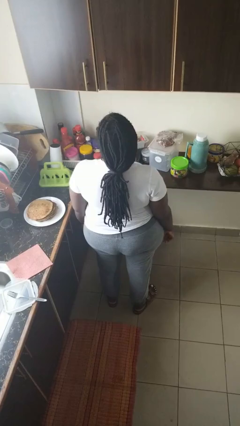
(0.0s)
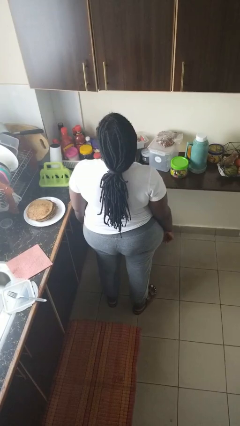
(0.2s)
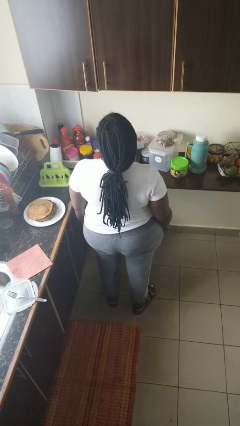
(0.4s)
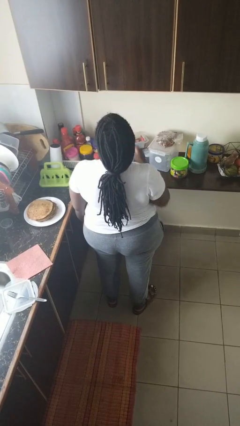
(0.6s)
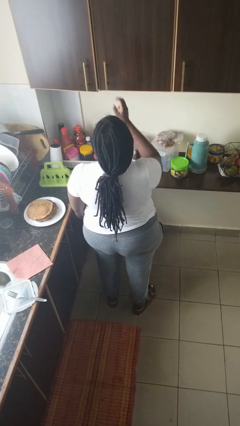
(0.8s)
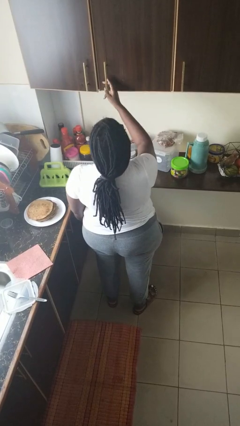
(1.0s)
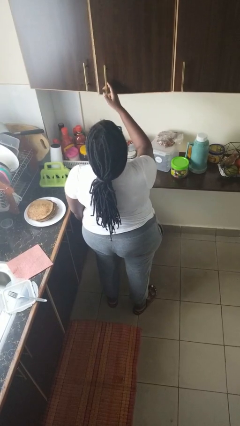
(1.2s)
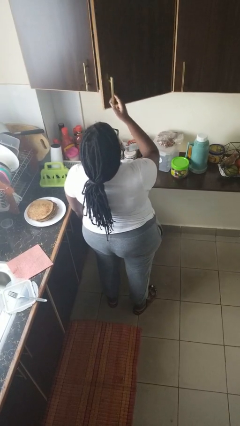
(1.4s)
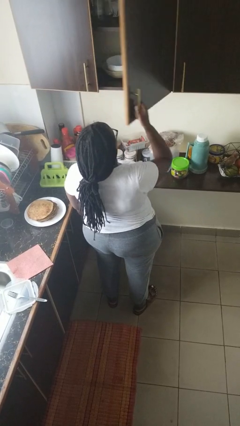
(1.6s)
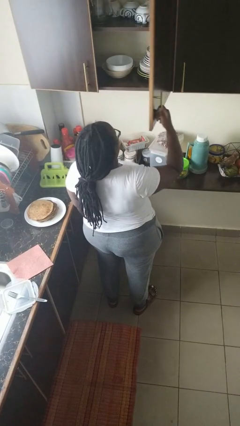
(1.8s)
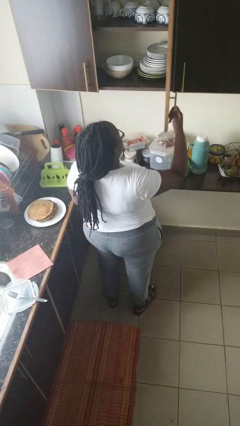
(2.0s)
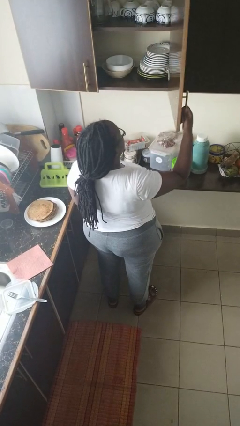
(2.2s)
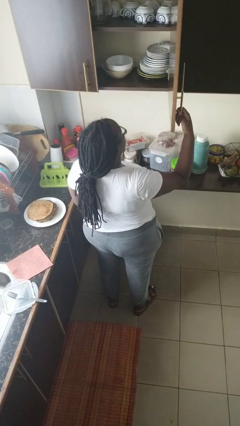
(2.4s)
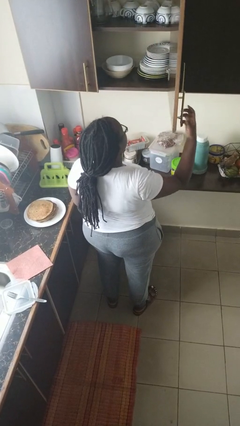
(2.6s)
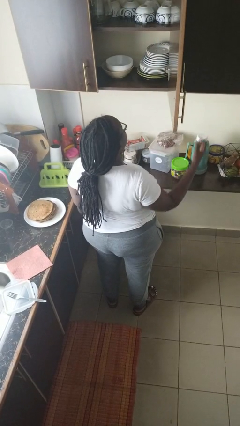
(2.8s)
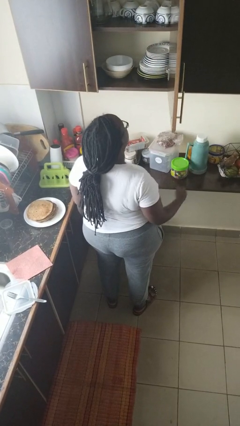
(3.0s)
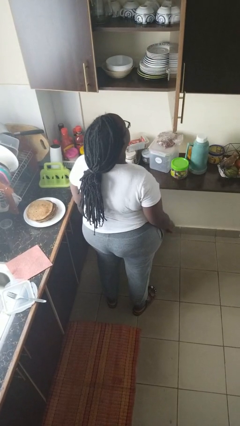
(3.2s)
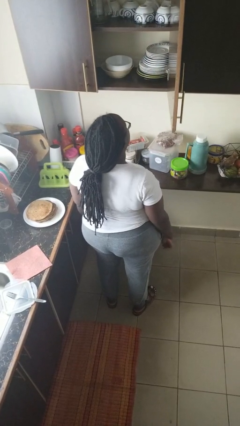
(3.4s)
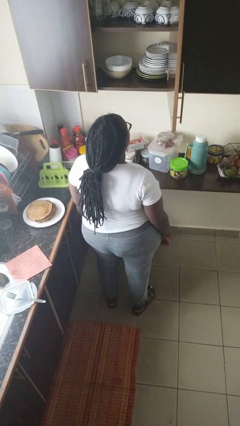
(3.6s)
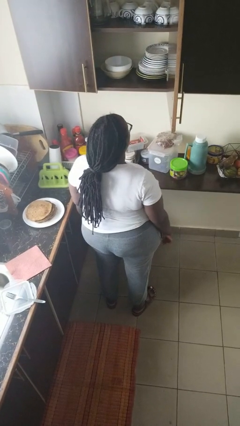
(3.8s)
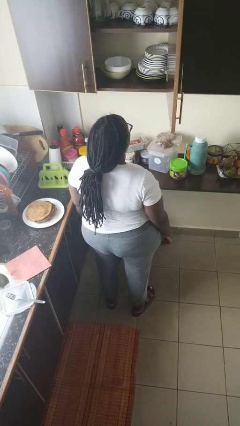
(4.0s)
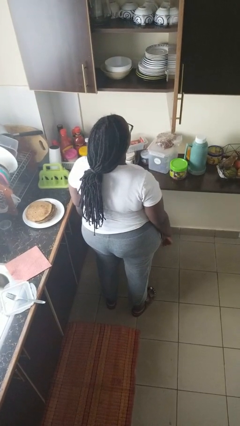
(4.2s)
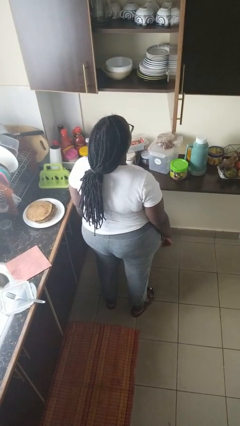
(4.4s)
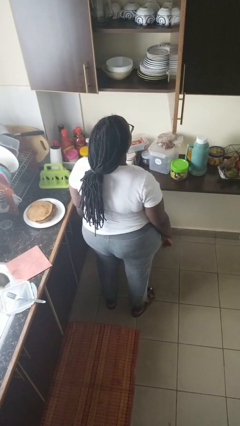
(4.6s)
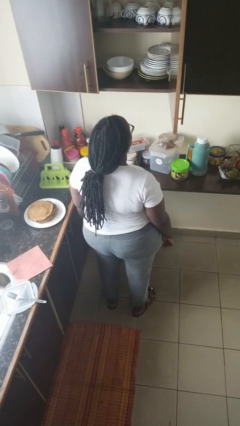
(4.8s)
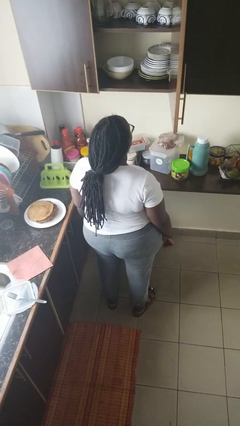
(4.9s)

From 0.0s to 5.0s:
person opens cabinet

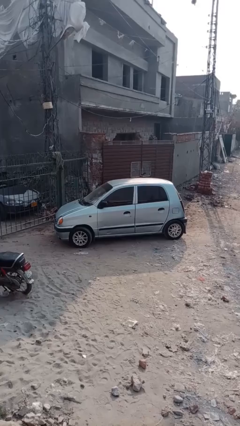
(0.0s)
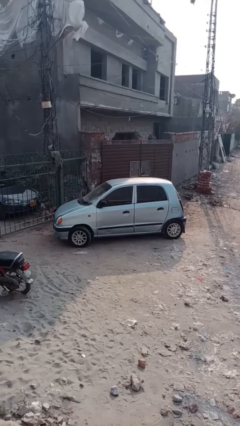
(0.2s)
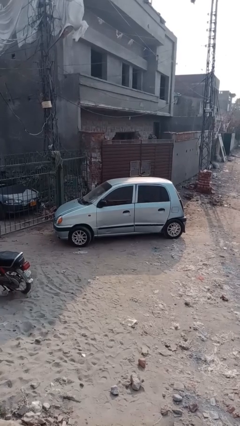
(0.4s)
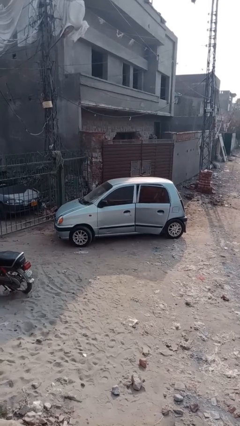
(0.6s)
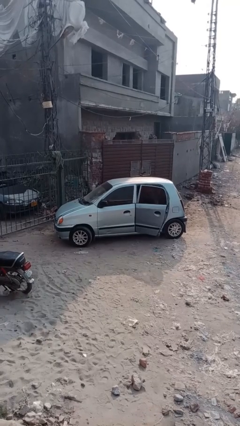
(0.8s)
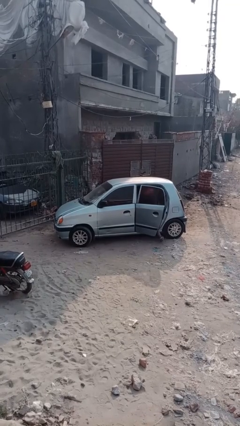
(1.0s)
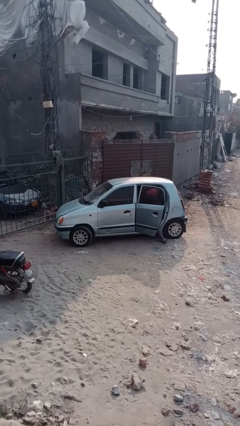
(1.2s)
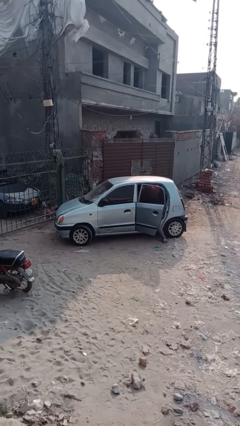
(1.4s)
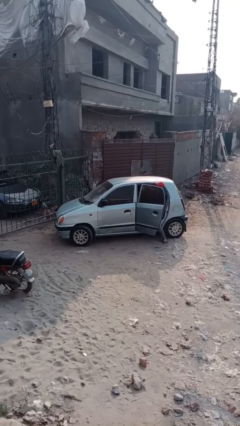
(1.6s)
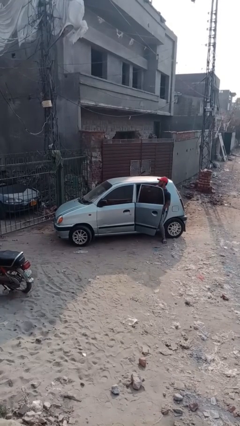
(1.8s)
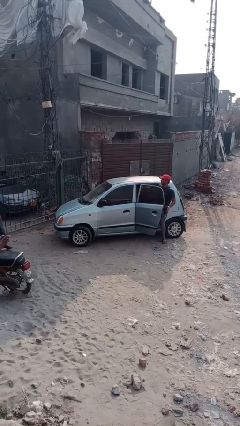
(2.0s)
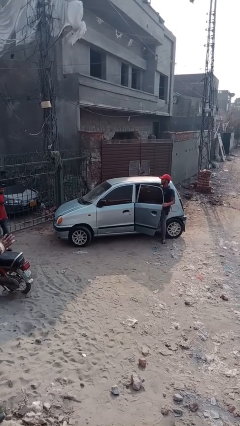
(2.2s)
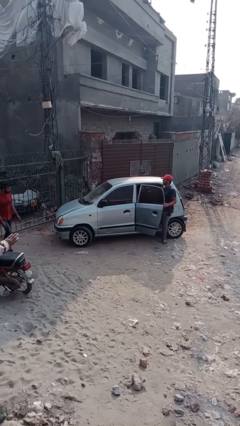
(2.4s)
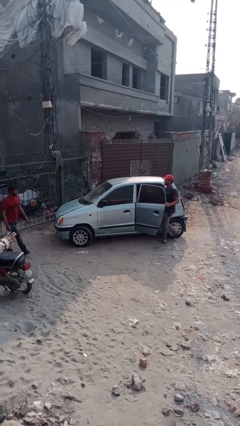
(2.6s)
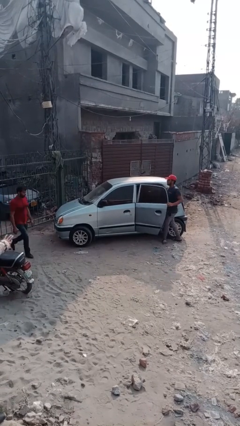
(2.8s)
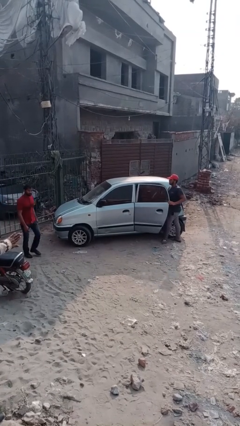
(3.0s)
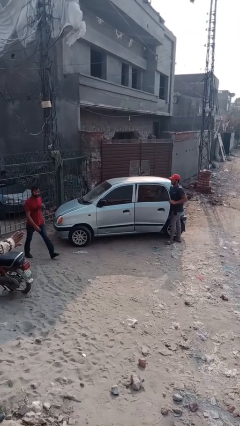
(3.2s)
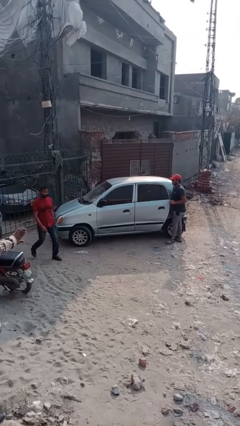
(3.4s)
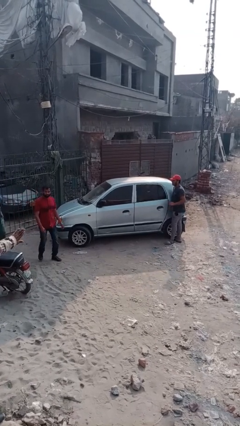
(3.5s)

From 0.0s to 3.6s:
car drops off person

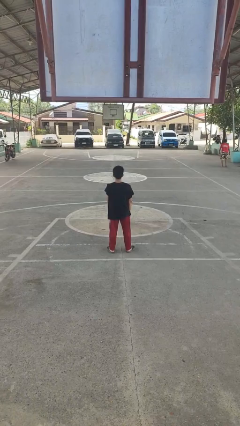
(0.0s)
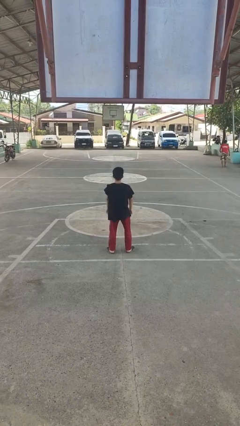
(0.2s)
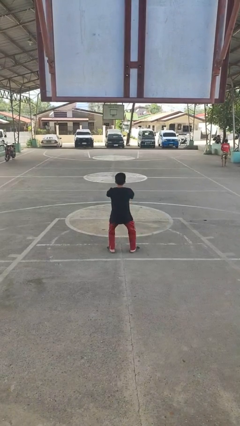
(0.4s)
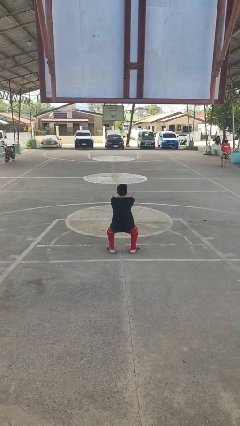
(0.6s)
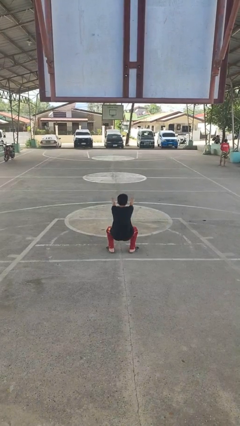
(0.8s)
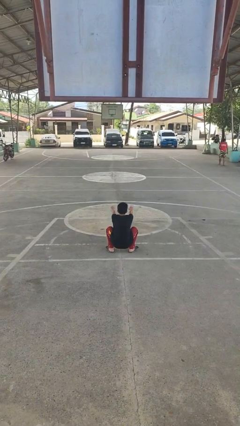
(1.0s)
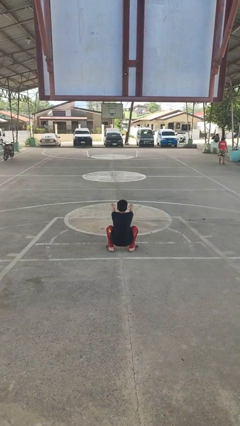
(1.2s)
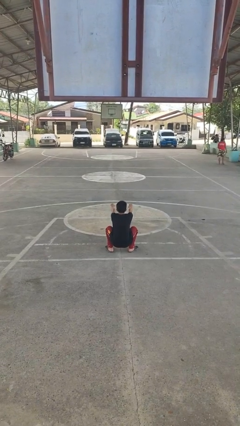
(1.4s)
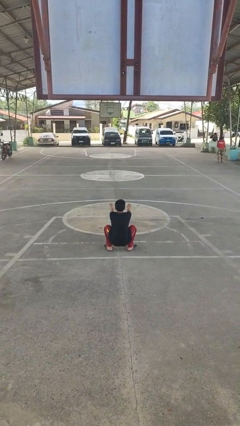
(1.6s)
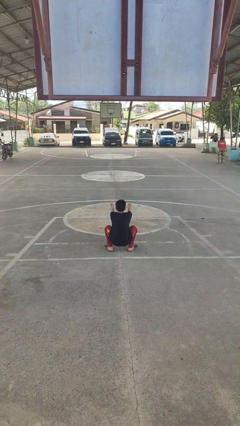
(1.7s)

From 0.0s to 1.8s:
person squats

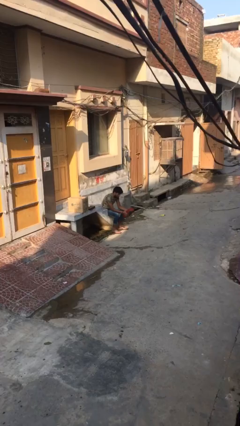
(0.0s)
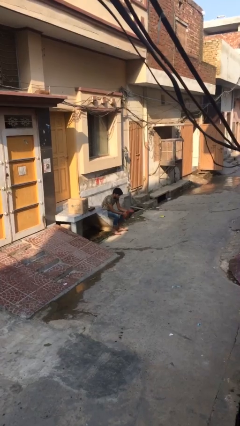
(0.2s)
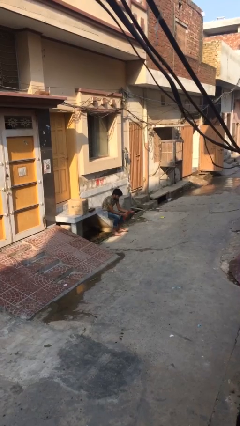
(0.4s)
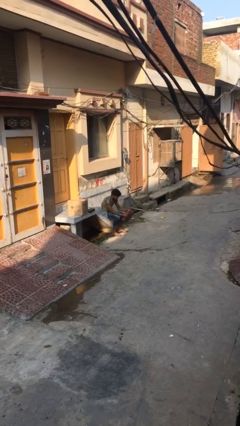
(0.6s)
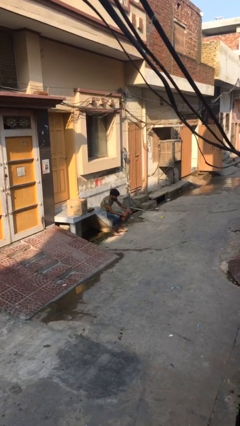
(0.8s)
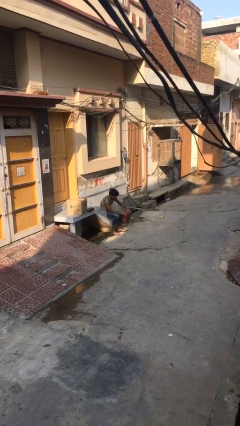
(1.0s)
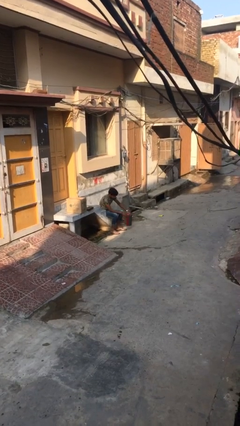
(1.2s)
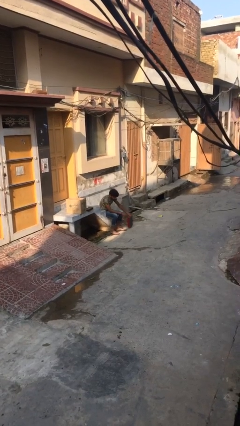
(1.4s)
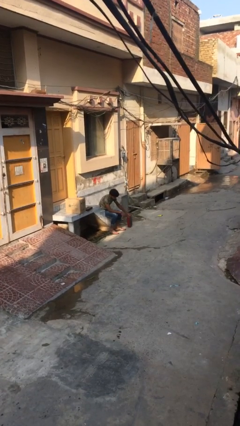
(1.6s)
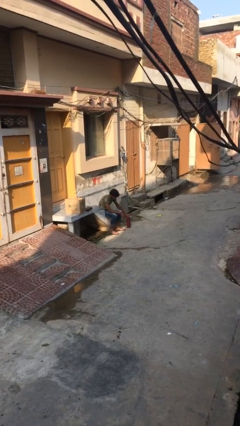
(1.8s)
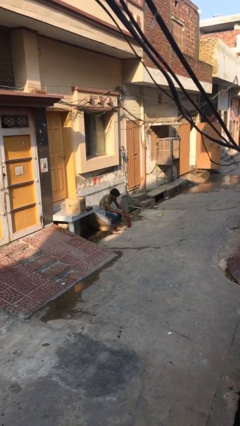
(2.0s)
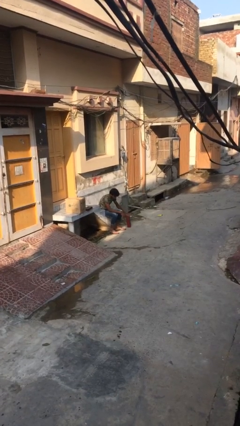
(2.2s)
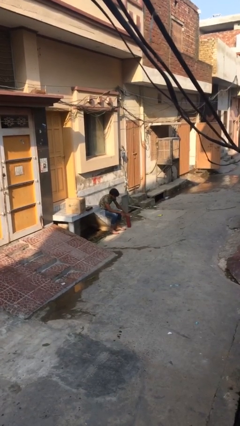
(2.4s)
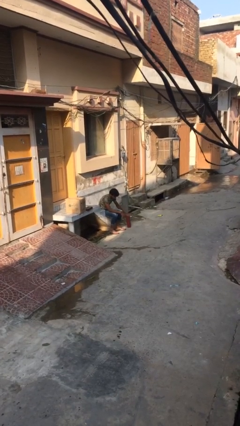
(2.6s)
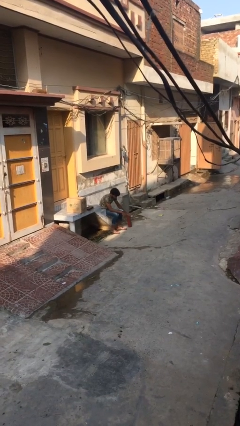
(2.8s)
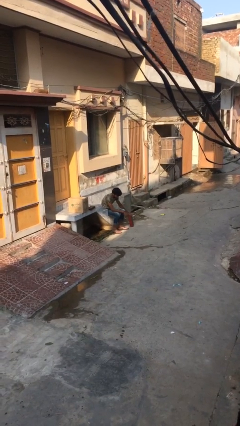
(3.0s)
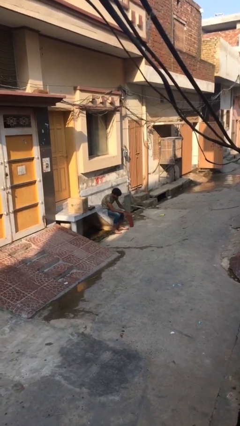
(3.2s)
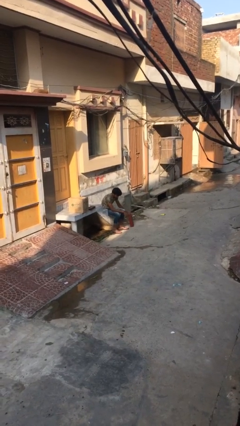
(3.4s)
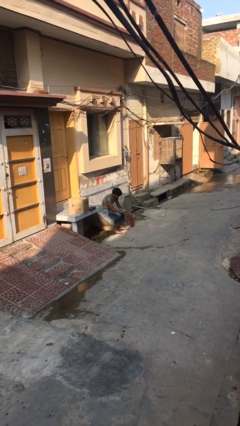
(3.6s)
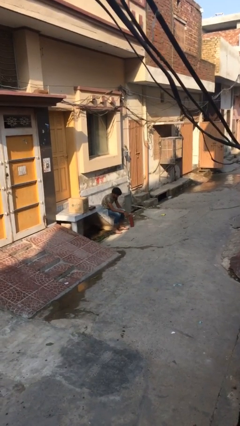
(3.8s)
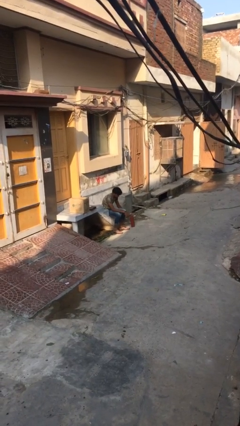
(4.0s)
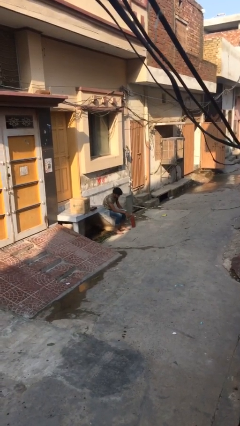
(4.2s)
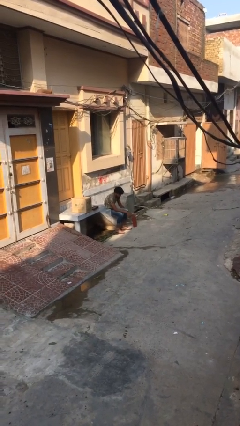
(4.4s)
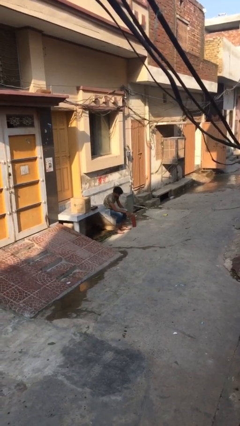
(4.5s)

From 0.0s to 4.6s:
person puts down object on floor

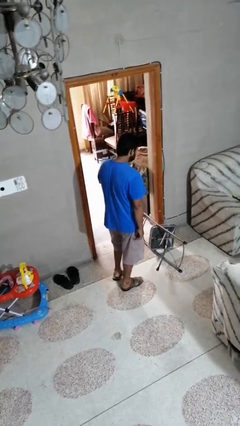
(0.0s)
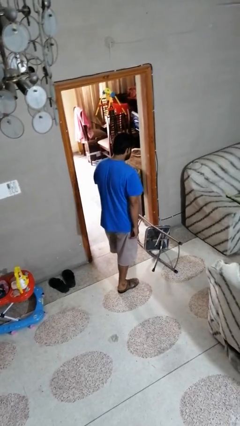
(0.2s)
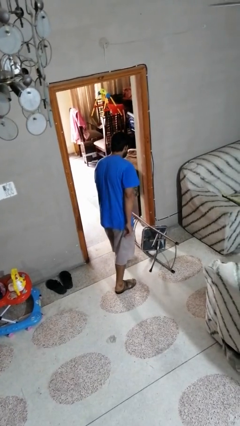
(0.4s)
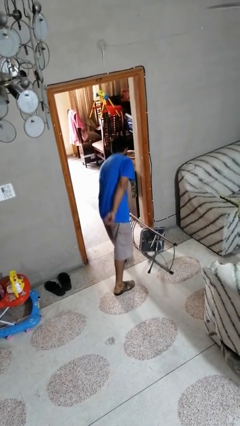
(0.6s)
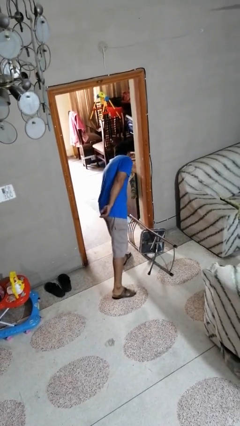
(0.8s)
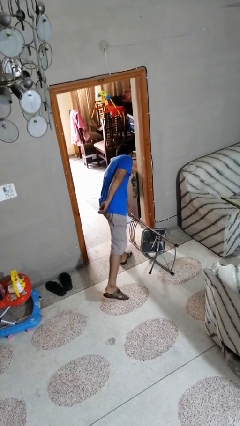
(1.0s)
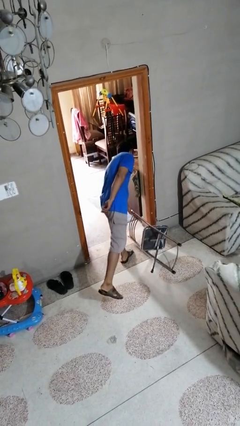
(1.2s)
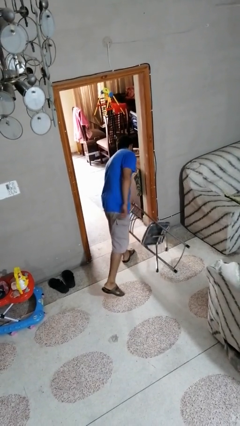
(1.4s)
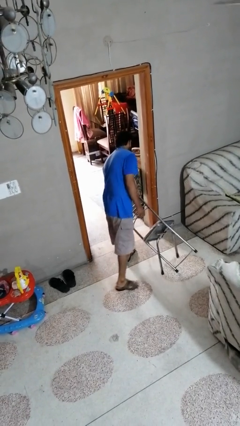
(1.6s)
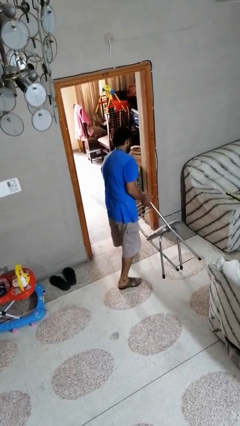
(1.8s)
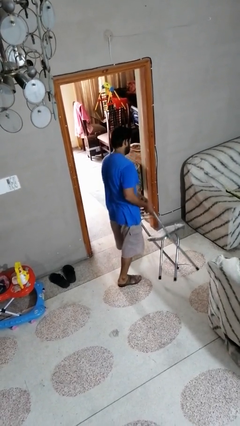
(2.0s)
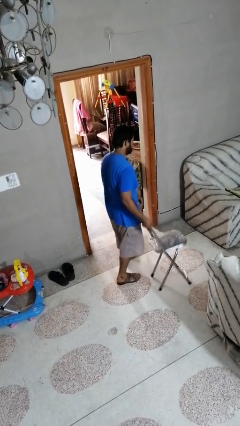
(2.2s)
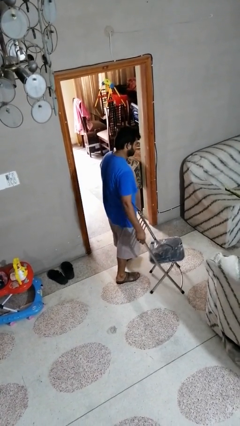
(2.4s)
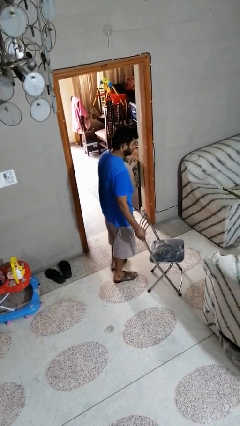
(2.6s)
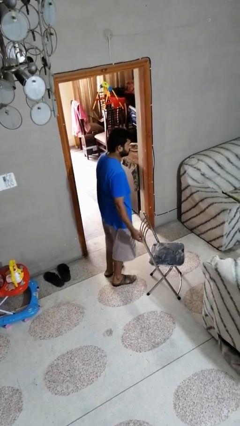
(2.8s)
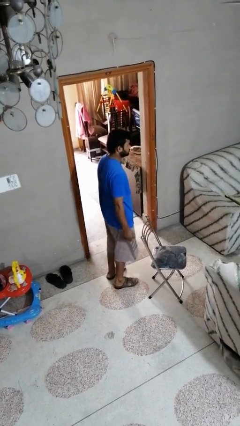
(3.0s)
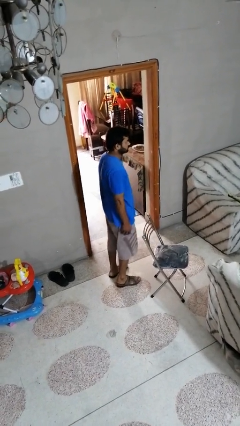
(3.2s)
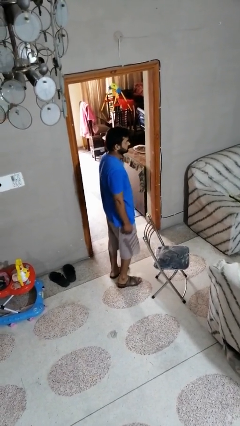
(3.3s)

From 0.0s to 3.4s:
person sets upright furniture
